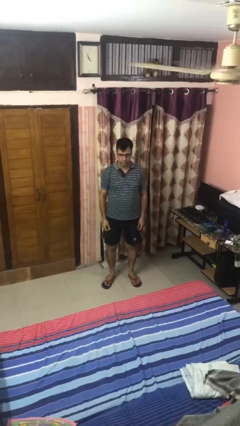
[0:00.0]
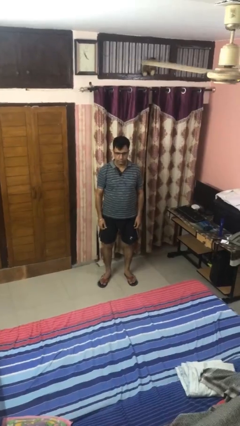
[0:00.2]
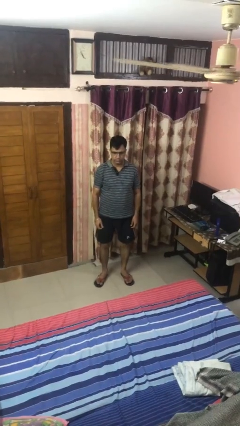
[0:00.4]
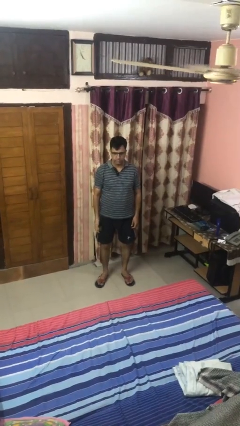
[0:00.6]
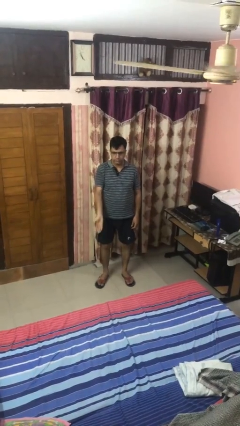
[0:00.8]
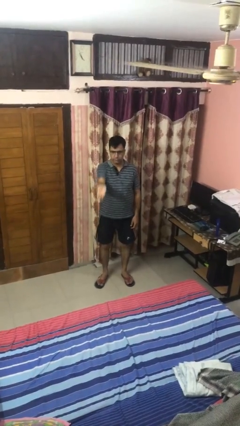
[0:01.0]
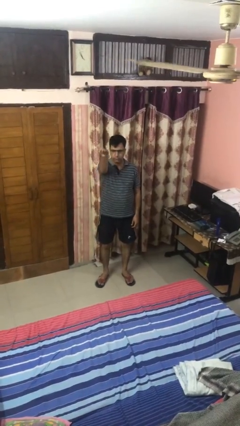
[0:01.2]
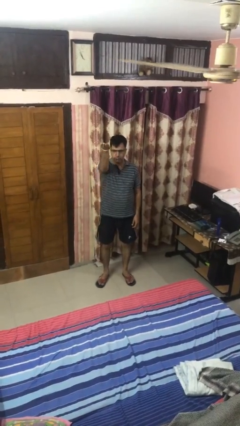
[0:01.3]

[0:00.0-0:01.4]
person gestures swipe up

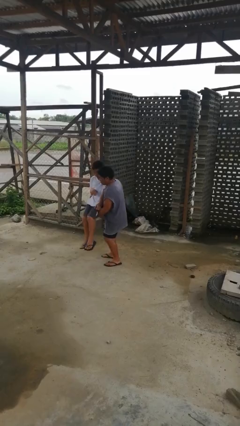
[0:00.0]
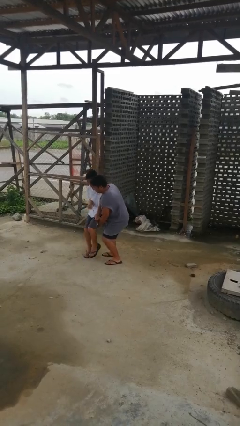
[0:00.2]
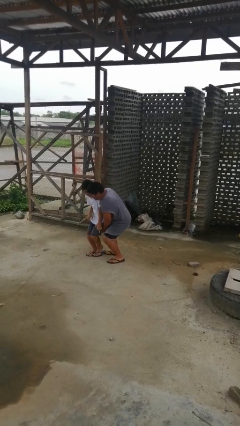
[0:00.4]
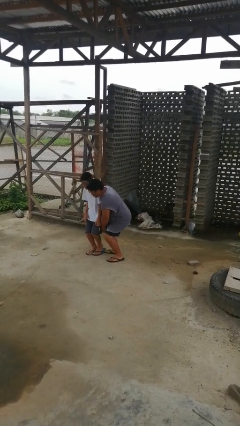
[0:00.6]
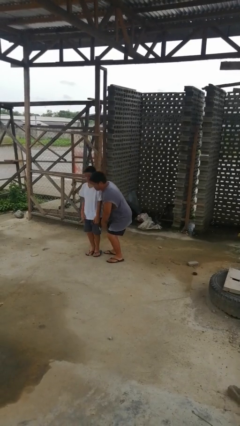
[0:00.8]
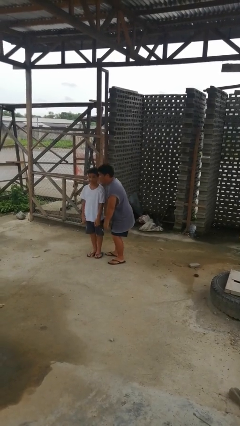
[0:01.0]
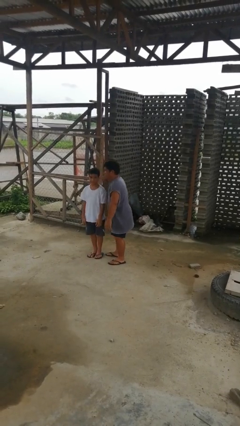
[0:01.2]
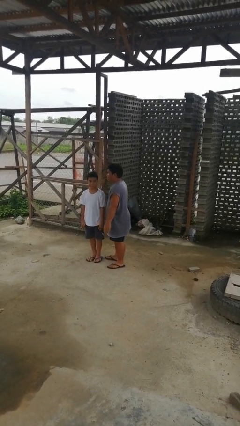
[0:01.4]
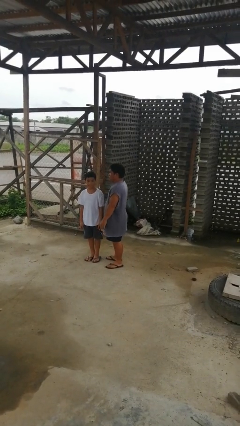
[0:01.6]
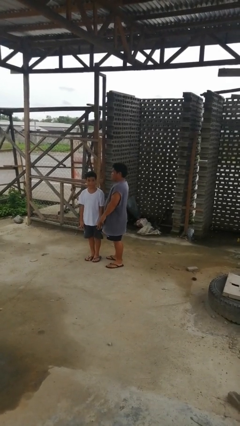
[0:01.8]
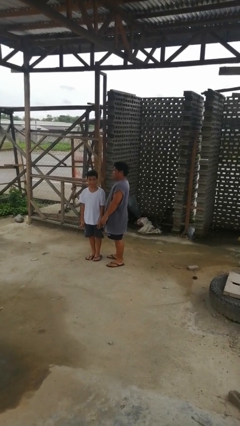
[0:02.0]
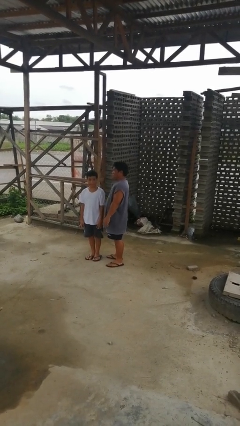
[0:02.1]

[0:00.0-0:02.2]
person puts down person

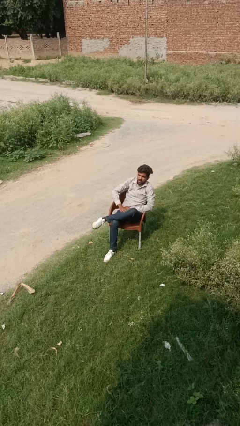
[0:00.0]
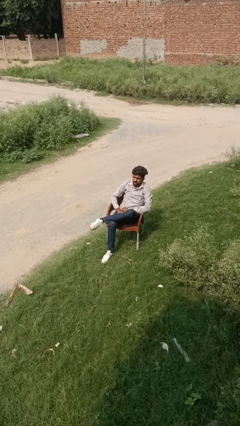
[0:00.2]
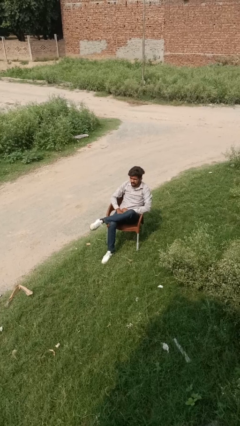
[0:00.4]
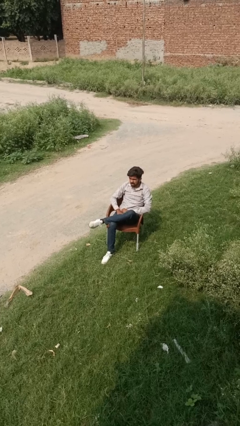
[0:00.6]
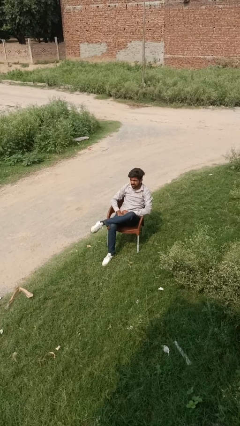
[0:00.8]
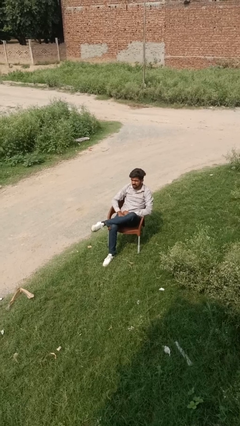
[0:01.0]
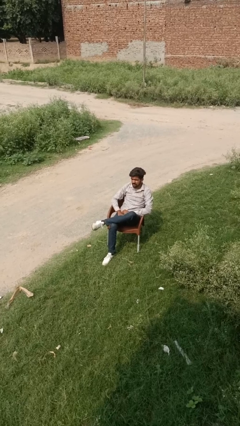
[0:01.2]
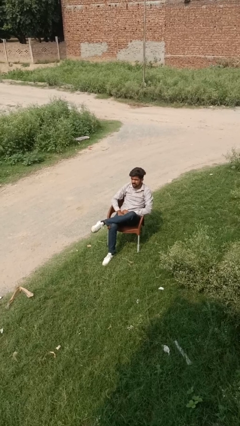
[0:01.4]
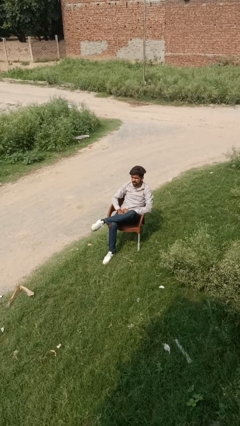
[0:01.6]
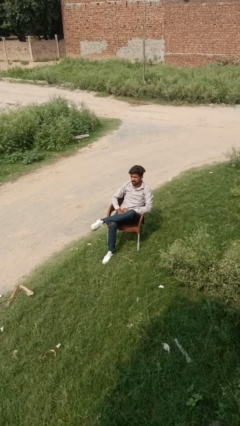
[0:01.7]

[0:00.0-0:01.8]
person gestures lower hand

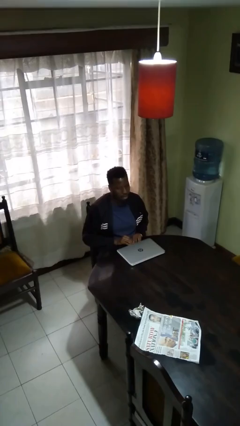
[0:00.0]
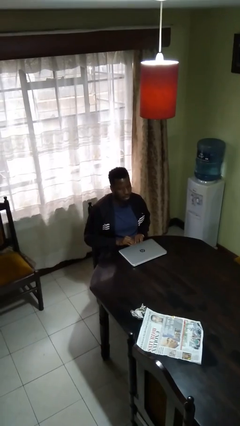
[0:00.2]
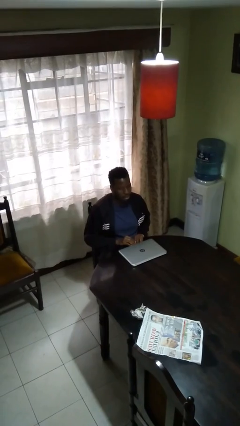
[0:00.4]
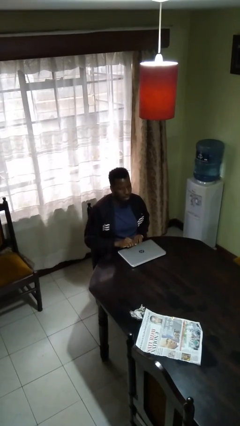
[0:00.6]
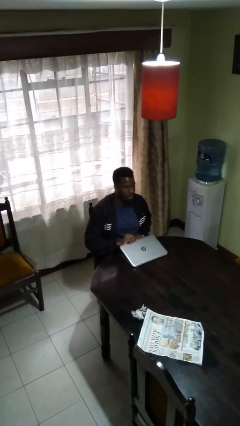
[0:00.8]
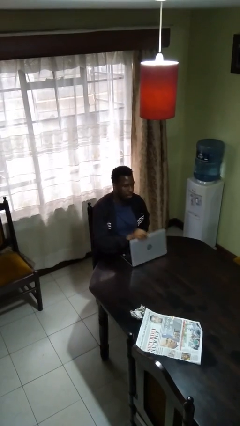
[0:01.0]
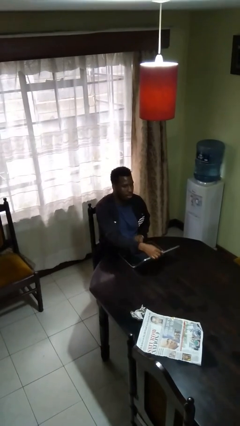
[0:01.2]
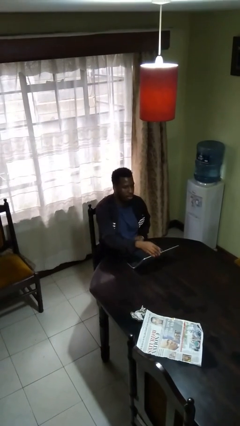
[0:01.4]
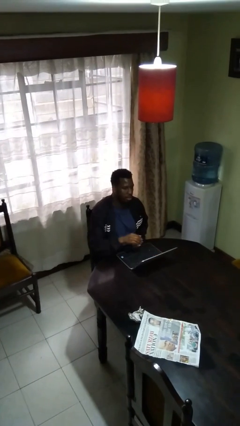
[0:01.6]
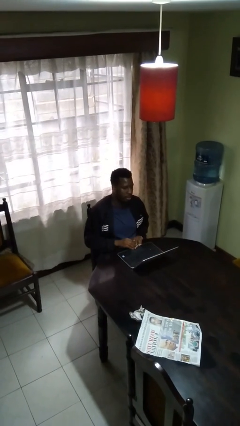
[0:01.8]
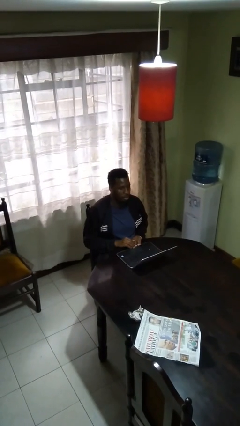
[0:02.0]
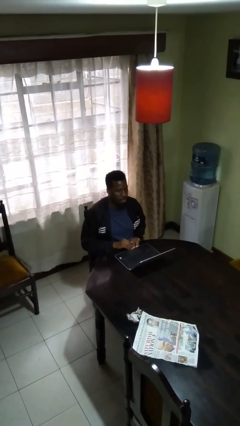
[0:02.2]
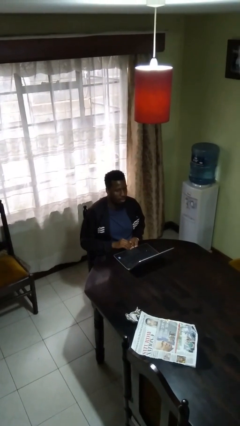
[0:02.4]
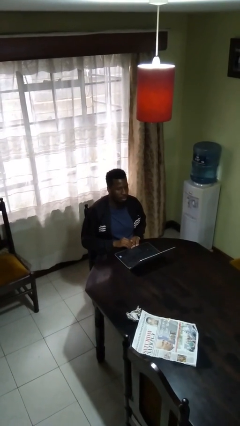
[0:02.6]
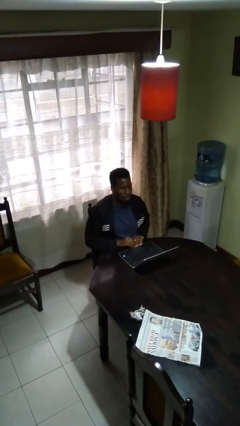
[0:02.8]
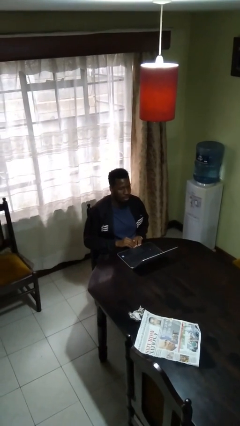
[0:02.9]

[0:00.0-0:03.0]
person opens laptop

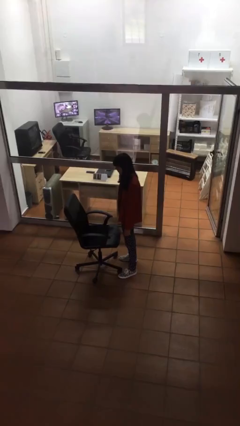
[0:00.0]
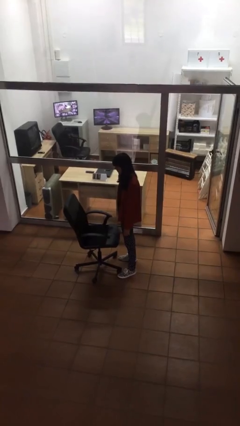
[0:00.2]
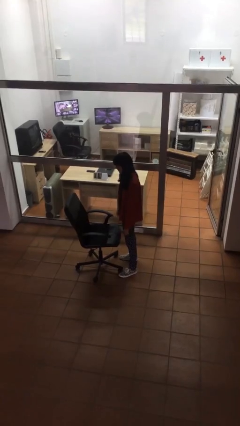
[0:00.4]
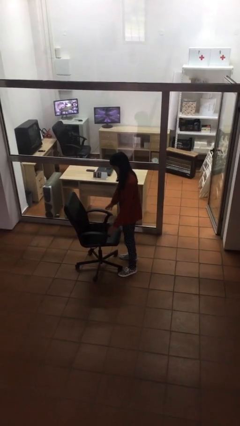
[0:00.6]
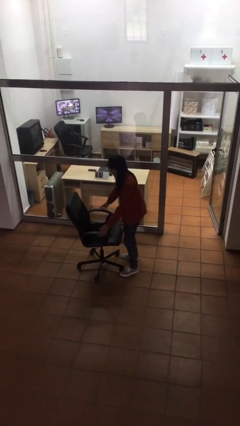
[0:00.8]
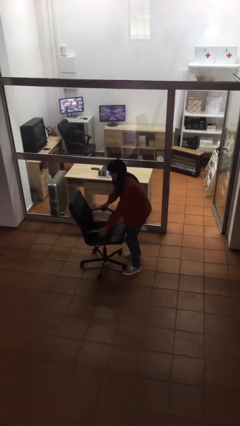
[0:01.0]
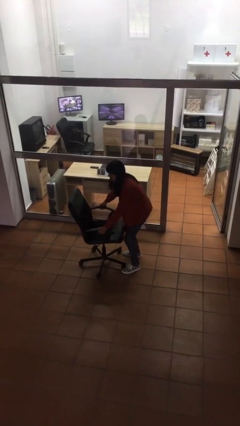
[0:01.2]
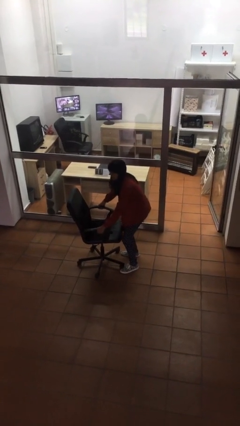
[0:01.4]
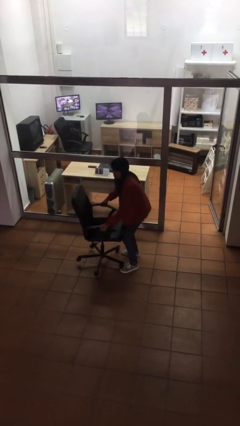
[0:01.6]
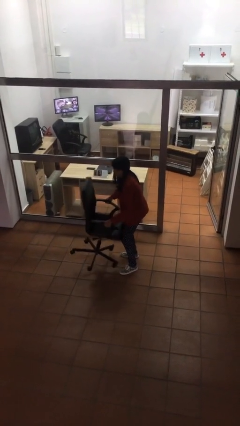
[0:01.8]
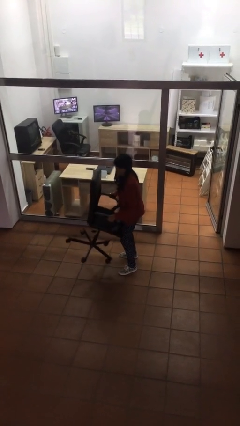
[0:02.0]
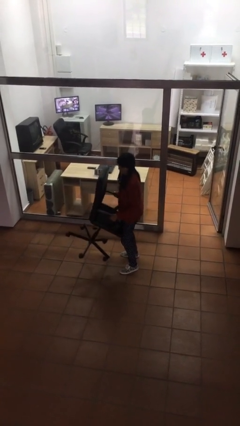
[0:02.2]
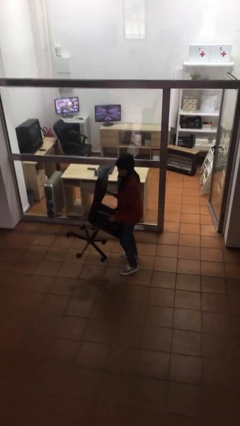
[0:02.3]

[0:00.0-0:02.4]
person picks up object from floor

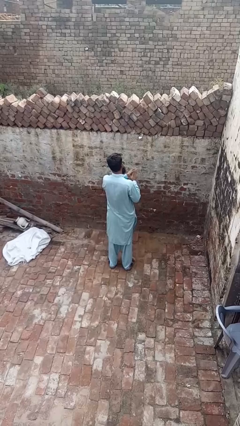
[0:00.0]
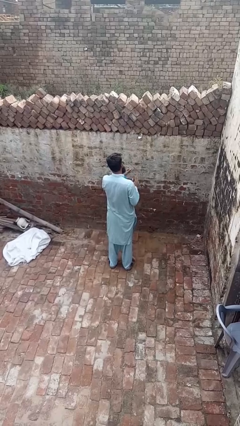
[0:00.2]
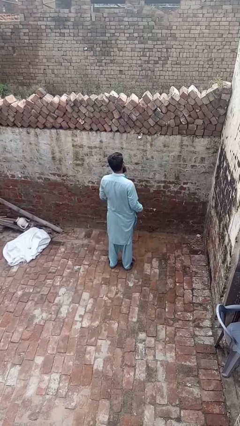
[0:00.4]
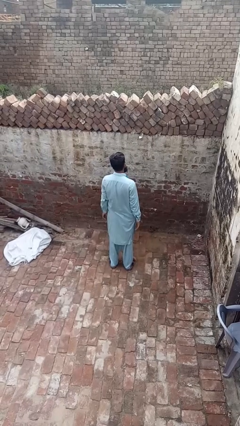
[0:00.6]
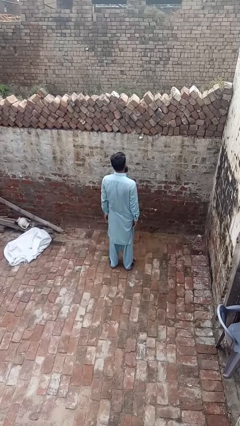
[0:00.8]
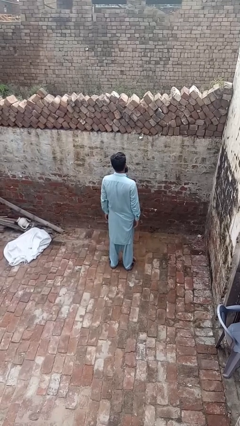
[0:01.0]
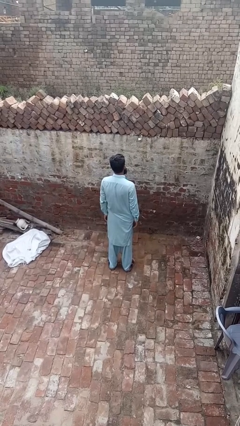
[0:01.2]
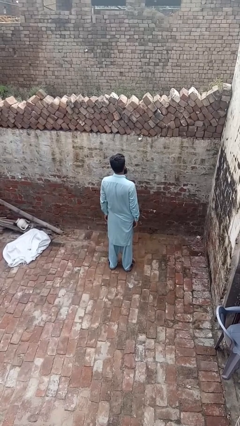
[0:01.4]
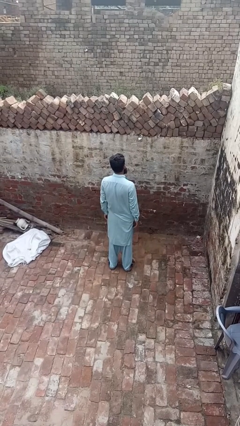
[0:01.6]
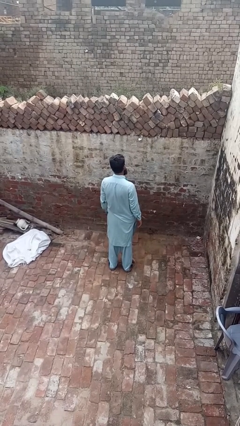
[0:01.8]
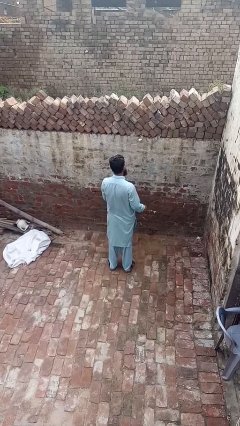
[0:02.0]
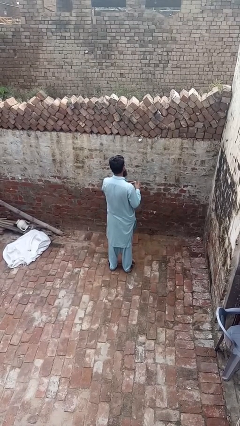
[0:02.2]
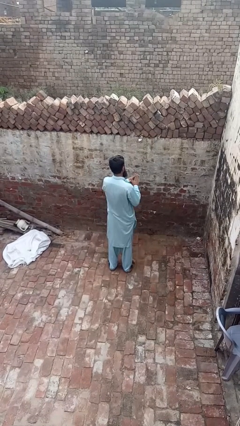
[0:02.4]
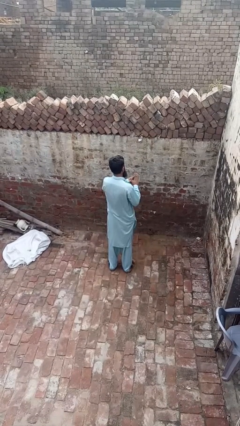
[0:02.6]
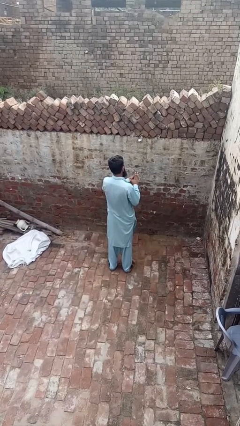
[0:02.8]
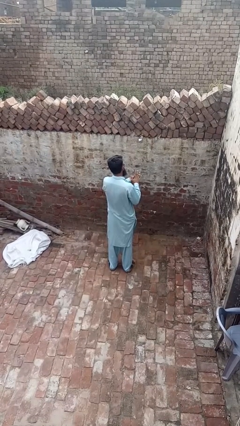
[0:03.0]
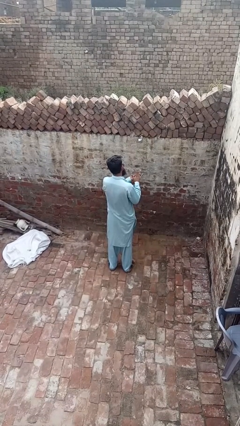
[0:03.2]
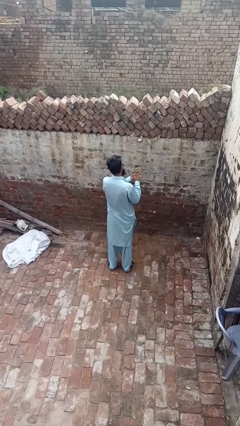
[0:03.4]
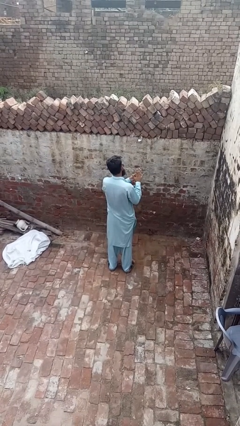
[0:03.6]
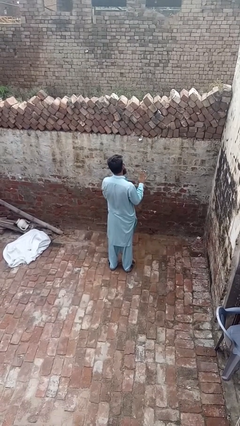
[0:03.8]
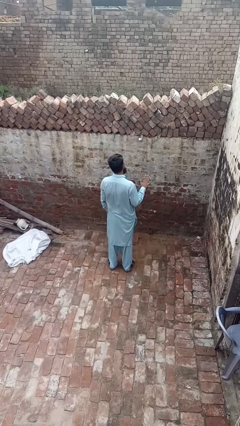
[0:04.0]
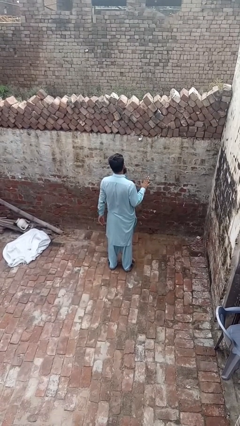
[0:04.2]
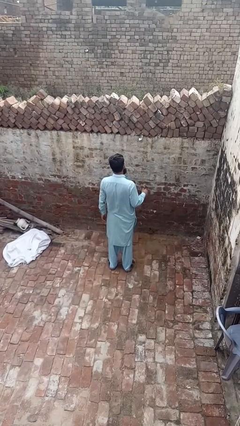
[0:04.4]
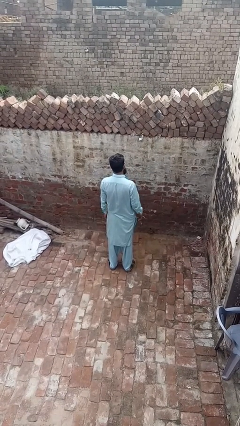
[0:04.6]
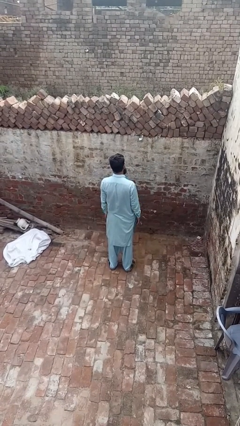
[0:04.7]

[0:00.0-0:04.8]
person puts on ring

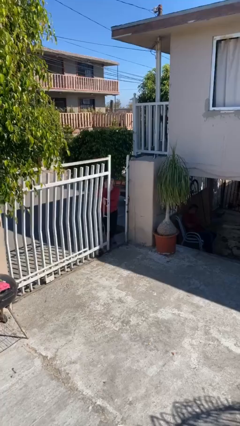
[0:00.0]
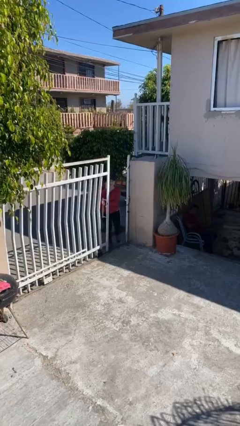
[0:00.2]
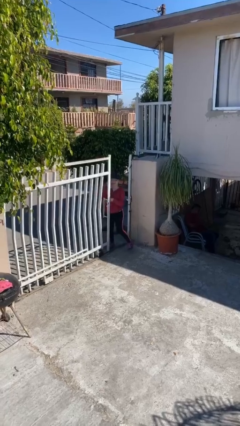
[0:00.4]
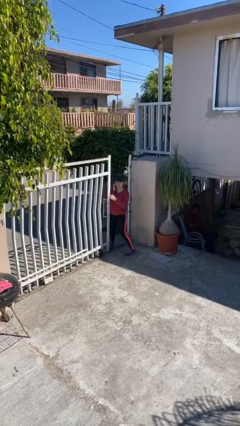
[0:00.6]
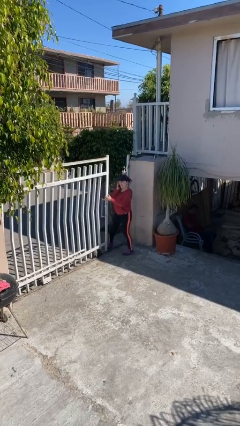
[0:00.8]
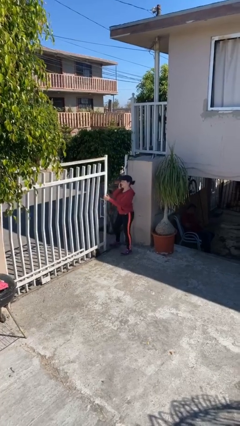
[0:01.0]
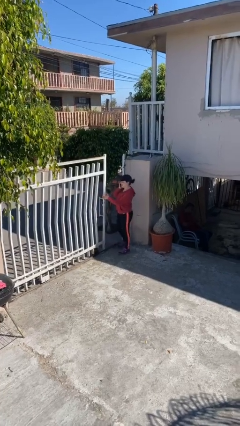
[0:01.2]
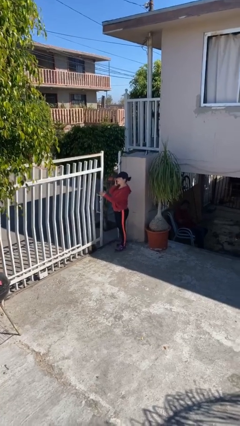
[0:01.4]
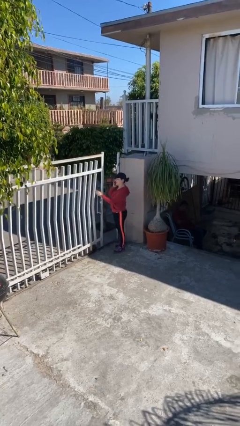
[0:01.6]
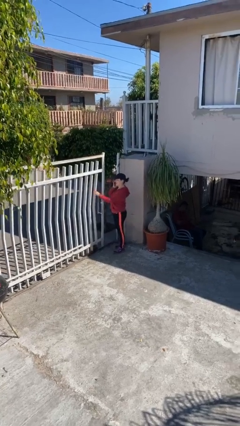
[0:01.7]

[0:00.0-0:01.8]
person enters scene through structure
